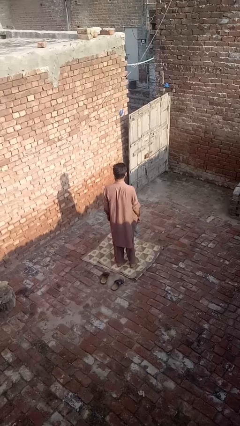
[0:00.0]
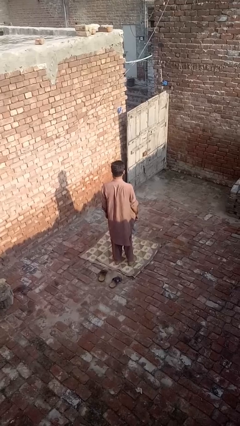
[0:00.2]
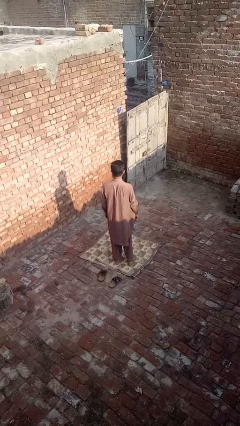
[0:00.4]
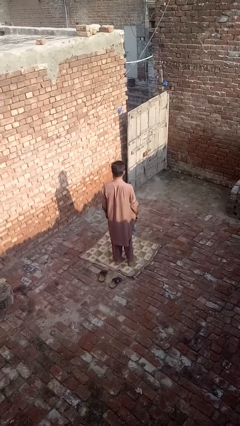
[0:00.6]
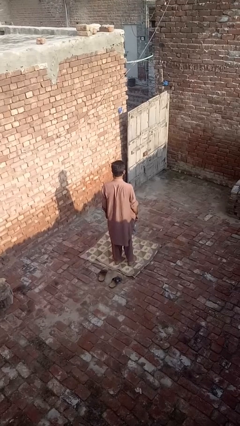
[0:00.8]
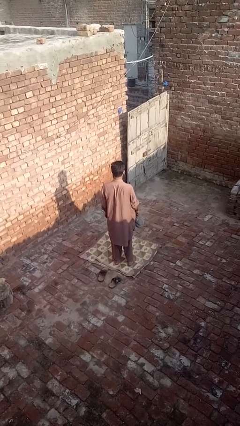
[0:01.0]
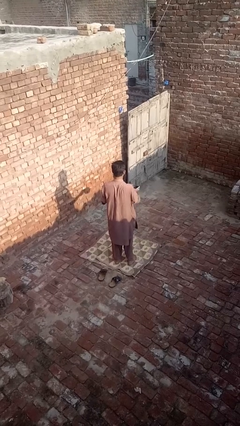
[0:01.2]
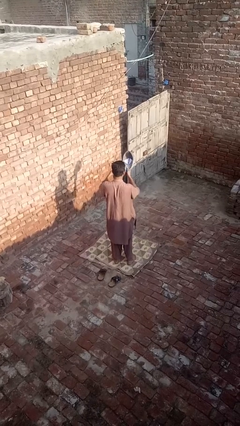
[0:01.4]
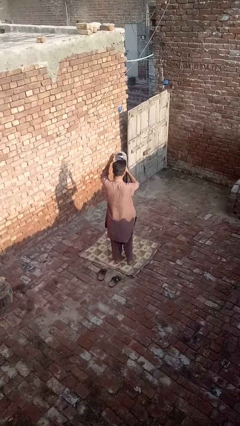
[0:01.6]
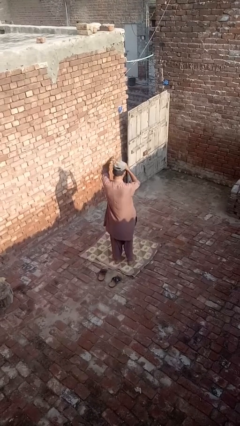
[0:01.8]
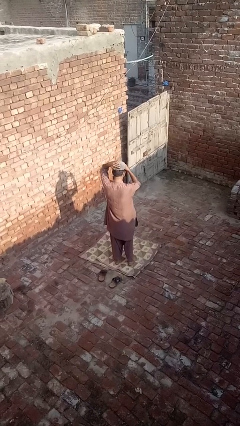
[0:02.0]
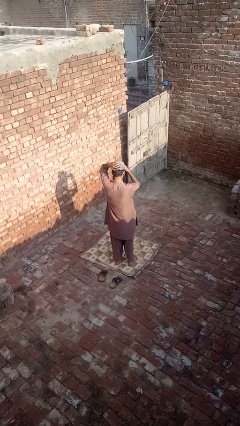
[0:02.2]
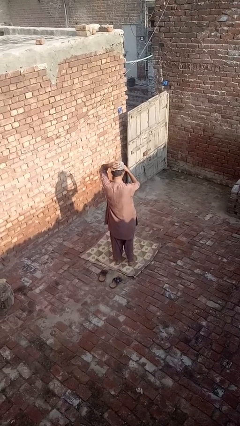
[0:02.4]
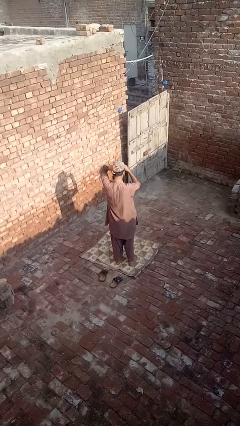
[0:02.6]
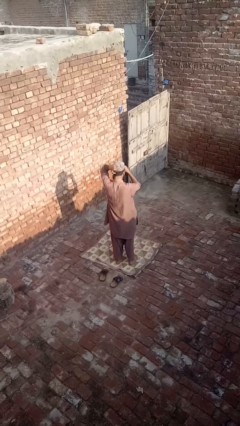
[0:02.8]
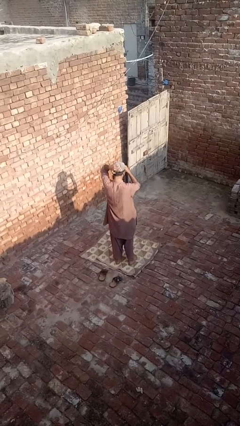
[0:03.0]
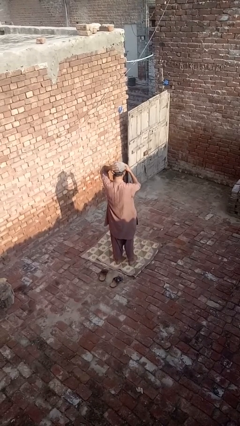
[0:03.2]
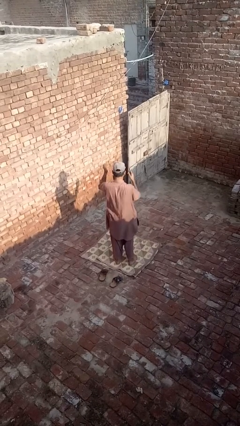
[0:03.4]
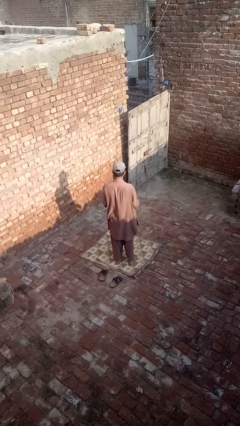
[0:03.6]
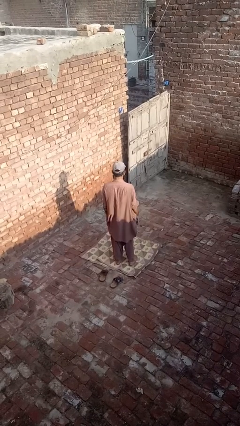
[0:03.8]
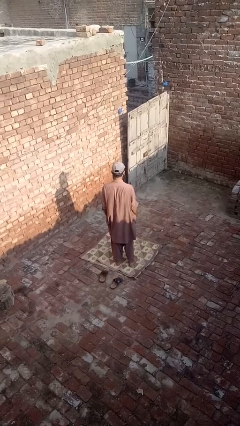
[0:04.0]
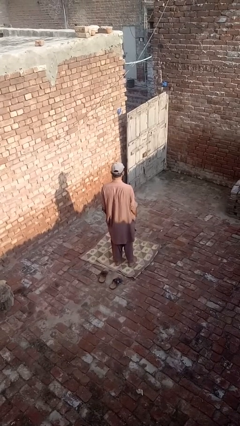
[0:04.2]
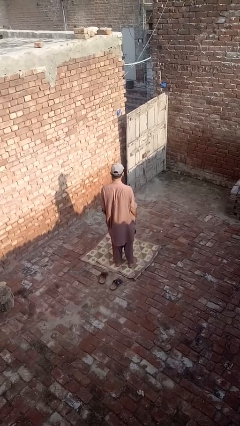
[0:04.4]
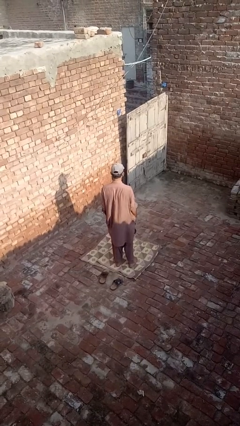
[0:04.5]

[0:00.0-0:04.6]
person puts on hat

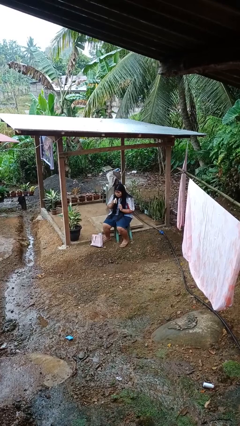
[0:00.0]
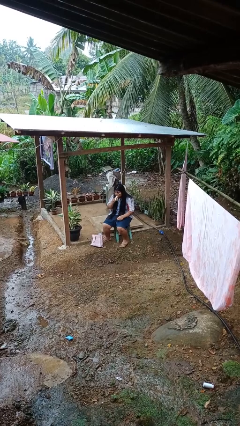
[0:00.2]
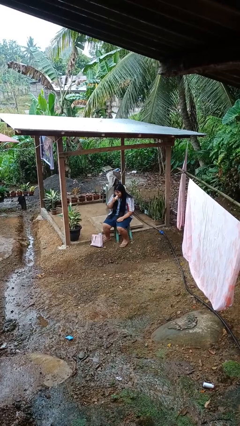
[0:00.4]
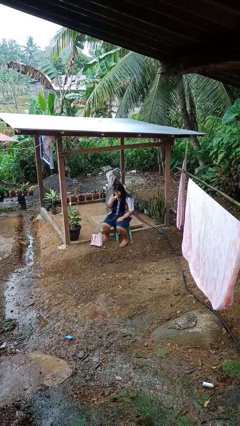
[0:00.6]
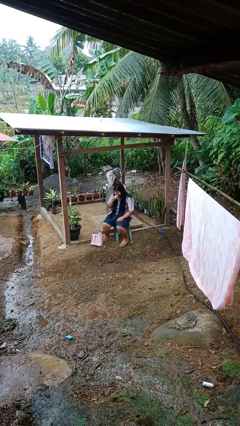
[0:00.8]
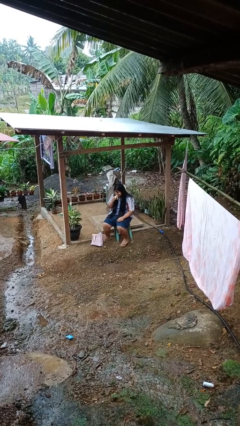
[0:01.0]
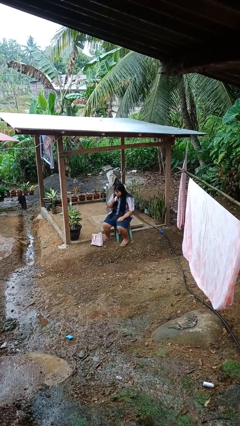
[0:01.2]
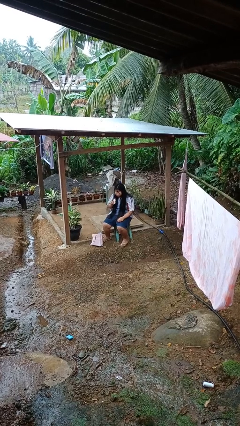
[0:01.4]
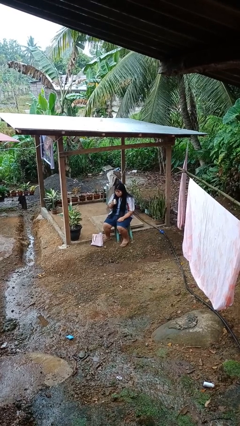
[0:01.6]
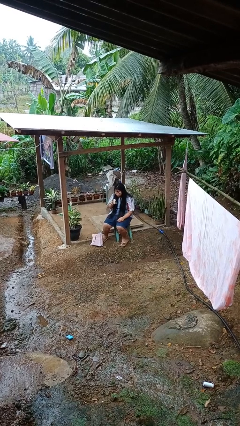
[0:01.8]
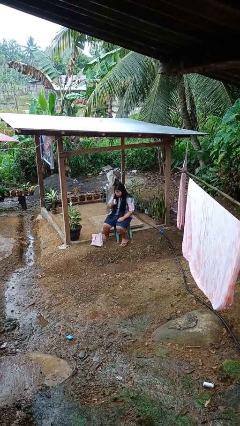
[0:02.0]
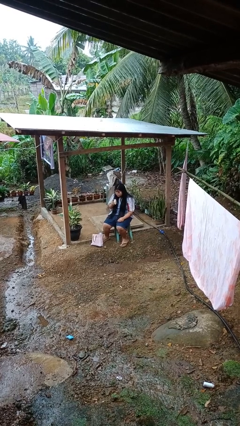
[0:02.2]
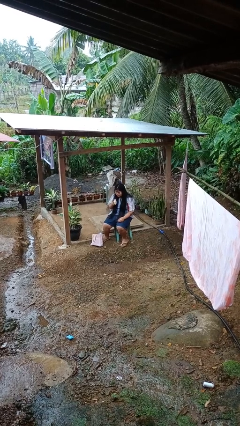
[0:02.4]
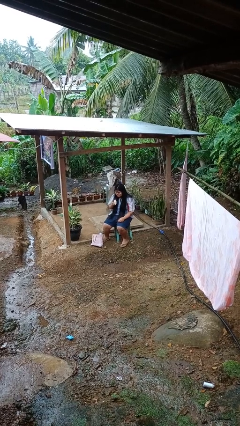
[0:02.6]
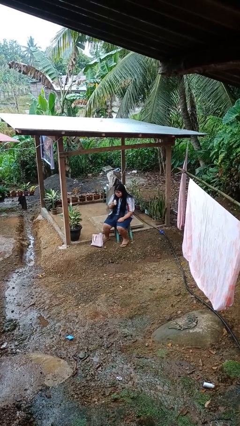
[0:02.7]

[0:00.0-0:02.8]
person eats banana

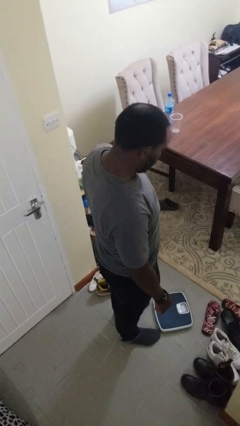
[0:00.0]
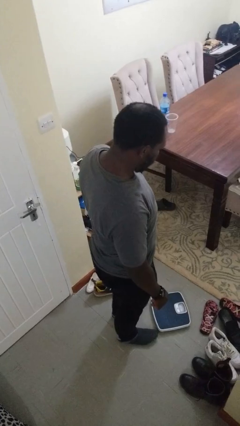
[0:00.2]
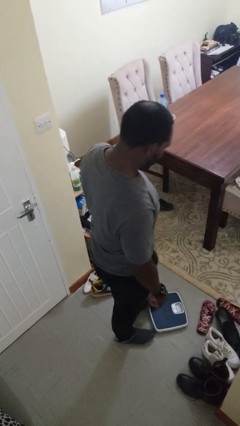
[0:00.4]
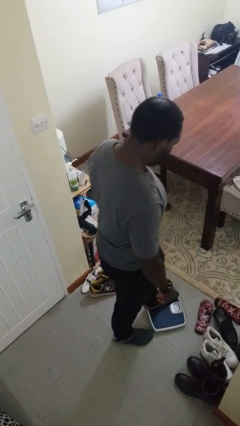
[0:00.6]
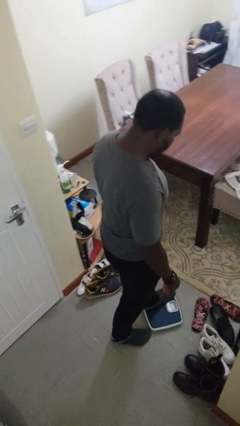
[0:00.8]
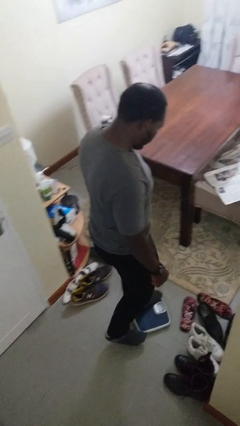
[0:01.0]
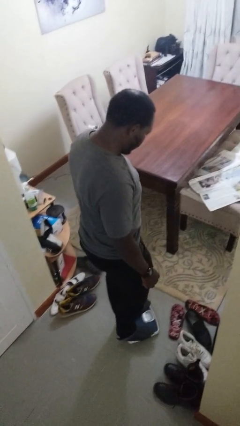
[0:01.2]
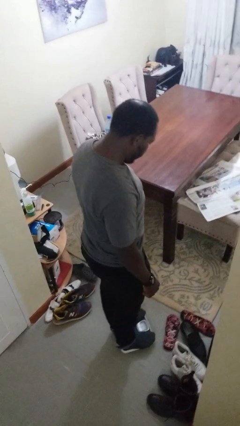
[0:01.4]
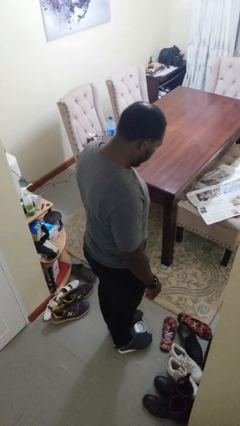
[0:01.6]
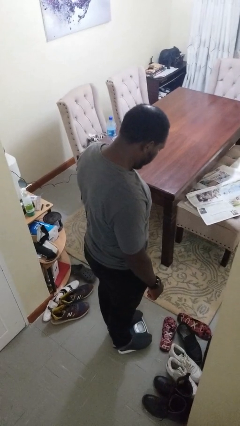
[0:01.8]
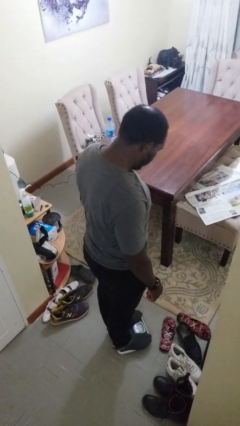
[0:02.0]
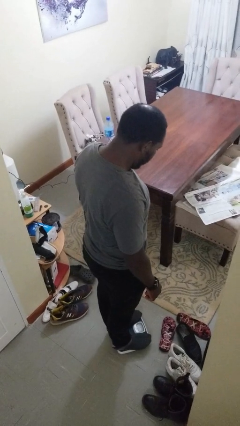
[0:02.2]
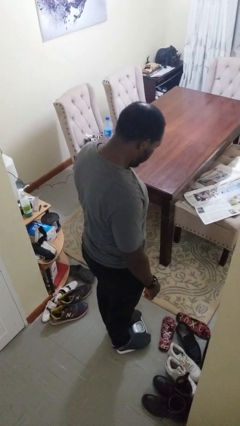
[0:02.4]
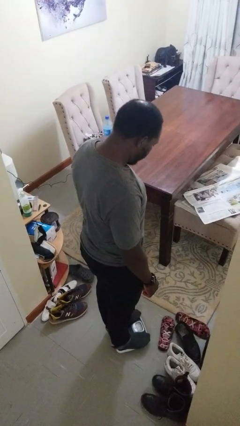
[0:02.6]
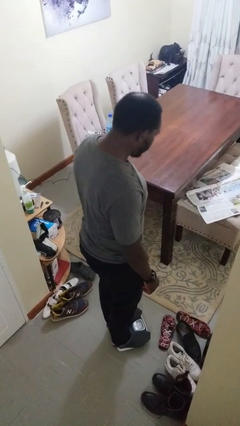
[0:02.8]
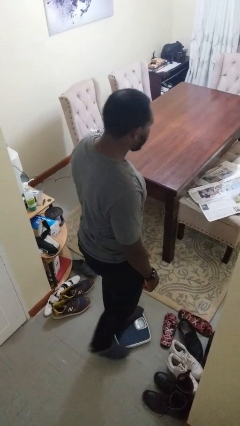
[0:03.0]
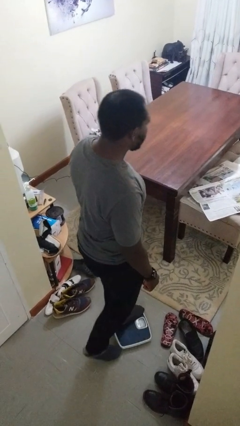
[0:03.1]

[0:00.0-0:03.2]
person uses bodyweight scale

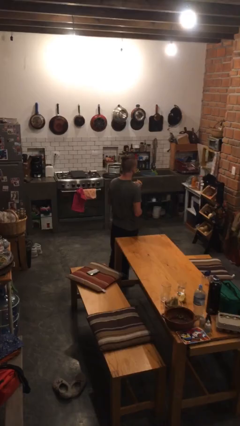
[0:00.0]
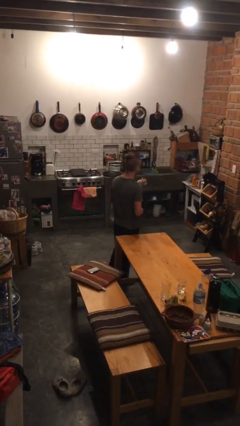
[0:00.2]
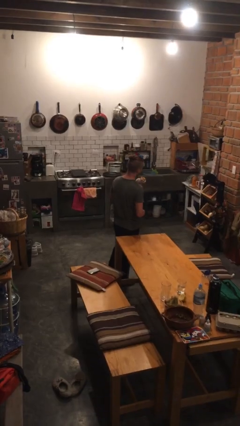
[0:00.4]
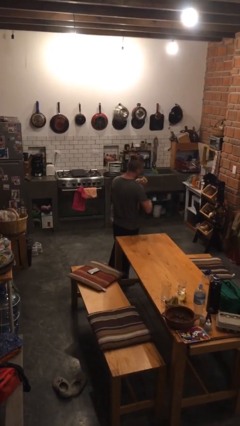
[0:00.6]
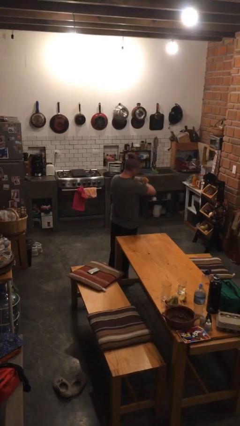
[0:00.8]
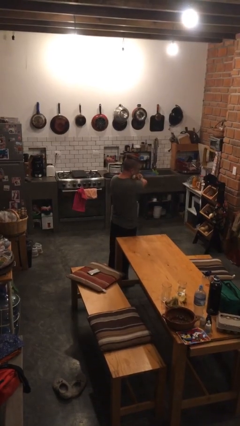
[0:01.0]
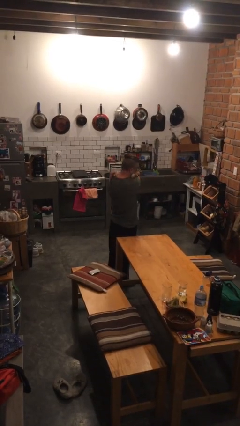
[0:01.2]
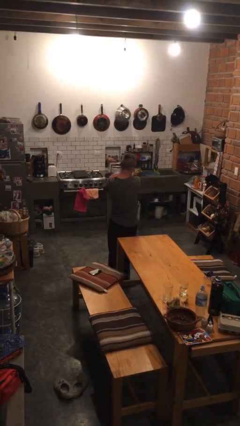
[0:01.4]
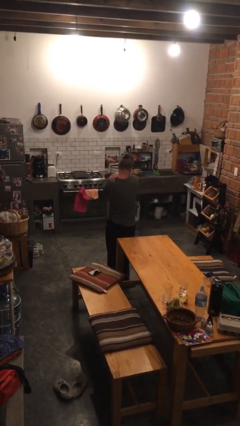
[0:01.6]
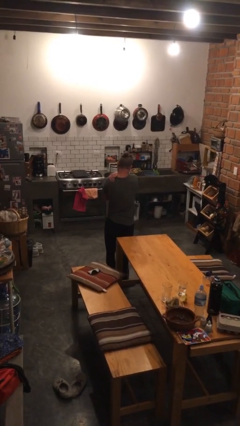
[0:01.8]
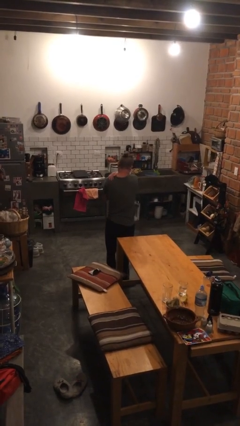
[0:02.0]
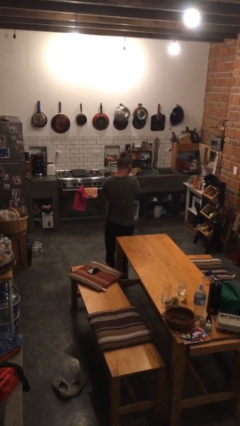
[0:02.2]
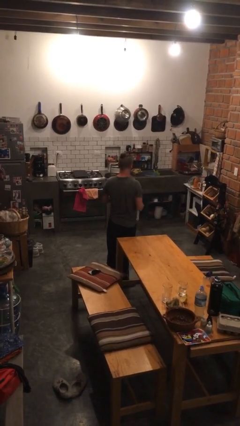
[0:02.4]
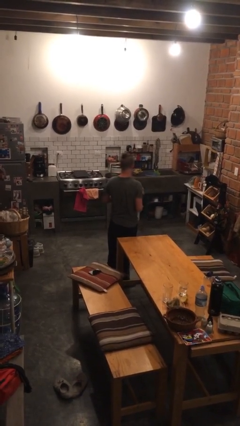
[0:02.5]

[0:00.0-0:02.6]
person hugs stuffed animal

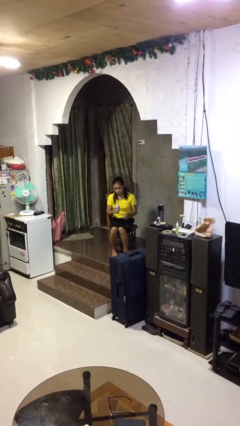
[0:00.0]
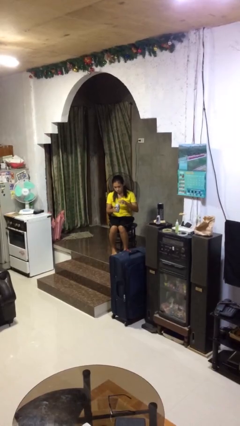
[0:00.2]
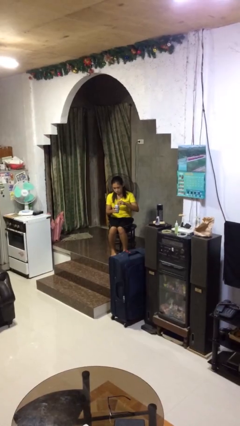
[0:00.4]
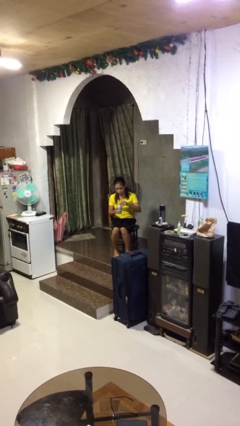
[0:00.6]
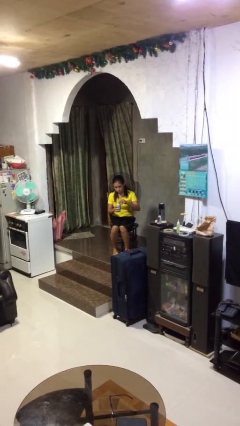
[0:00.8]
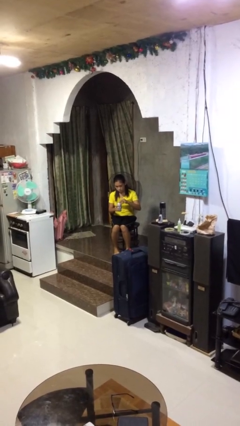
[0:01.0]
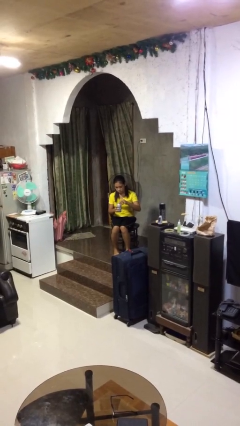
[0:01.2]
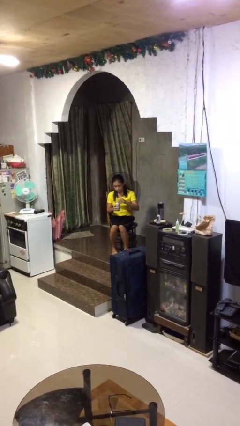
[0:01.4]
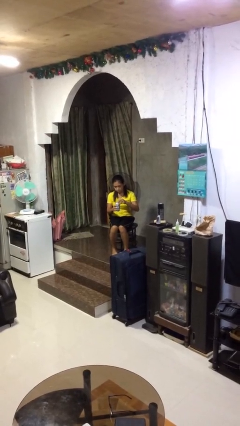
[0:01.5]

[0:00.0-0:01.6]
person opens beverage can

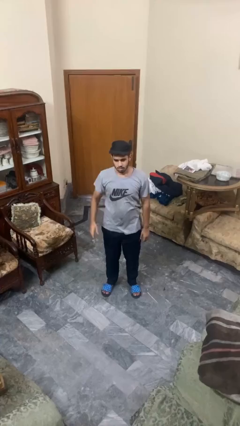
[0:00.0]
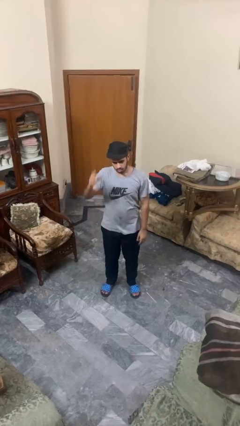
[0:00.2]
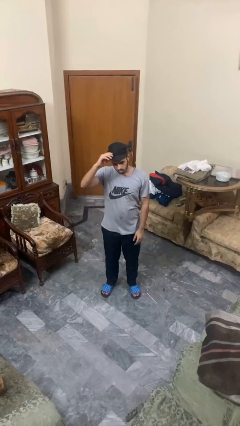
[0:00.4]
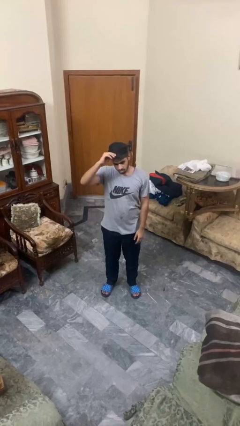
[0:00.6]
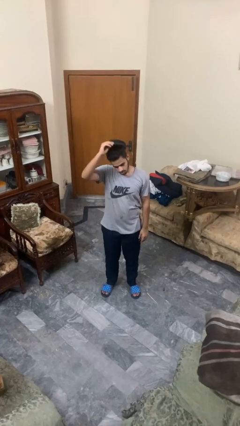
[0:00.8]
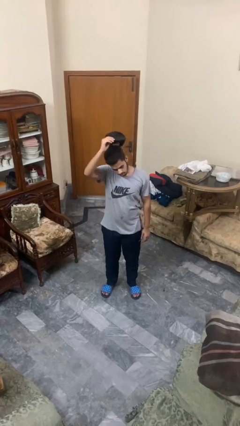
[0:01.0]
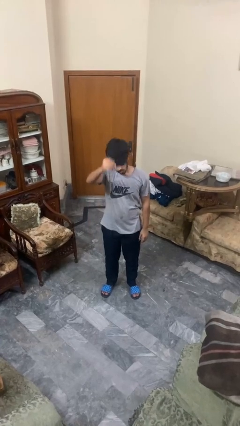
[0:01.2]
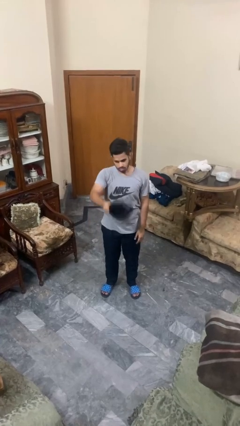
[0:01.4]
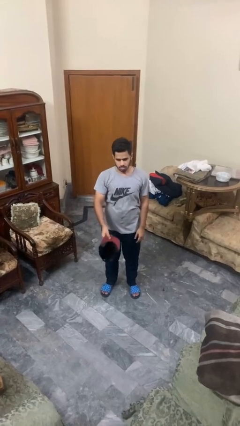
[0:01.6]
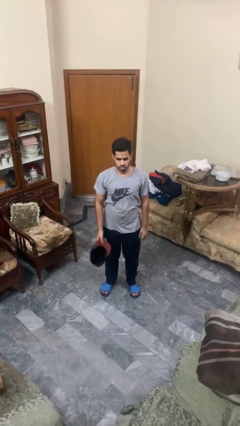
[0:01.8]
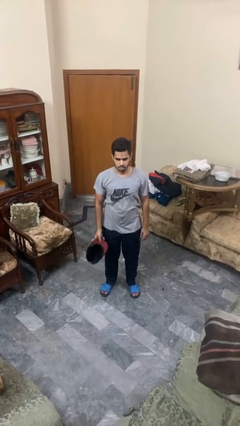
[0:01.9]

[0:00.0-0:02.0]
person takes off hat

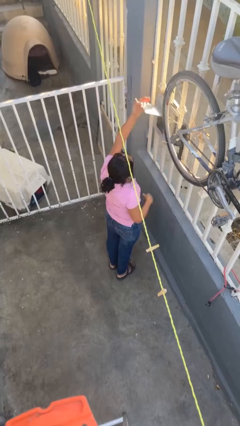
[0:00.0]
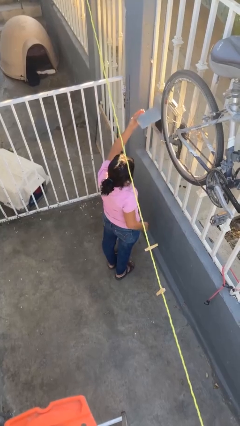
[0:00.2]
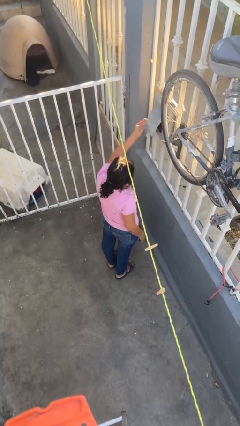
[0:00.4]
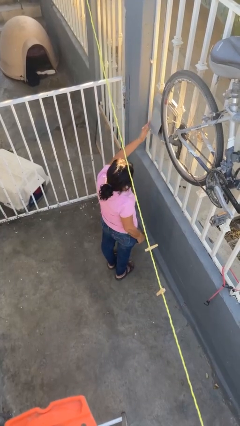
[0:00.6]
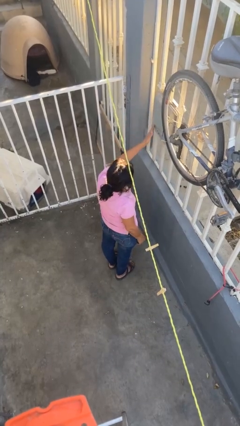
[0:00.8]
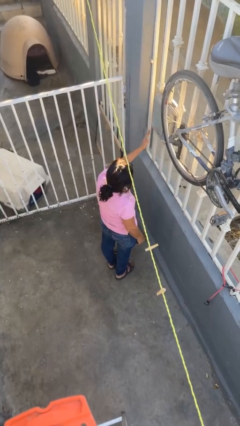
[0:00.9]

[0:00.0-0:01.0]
person closes mailbox
